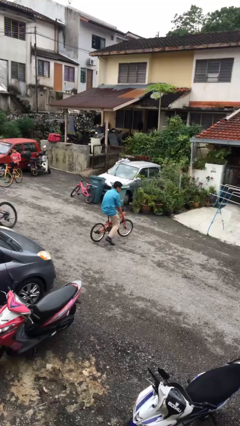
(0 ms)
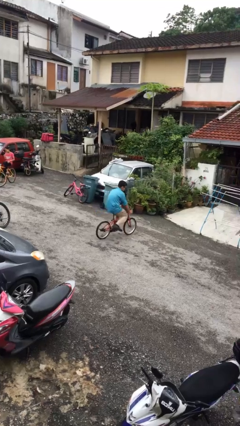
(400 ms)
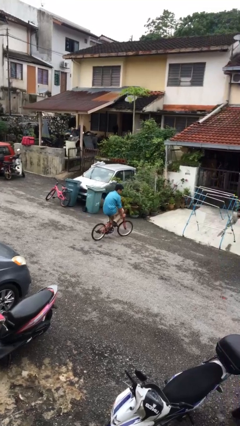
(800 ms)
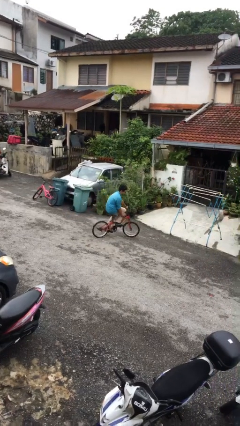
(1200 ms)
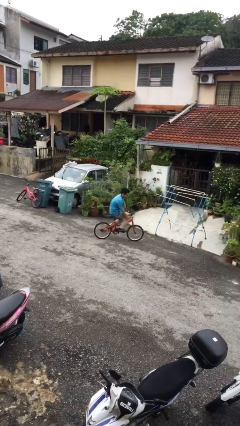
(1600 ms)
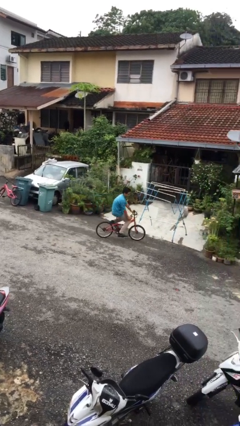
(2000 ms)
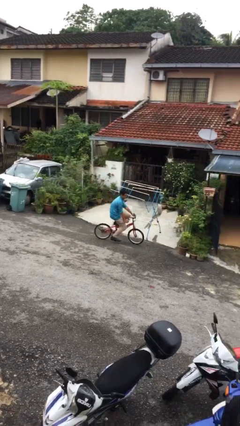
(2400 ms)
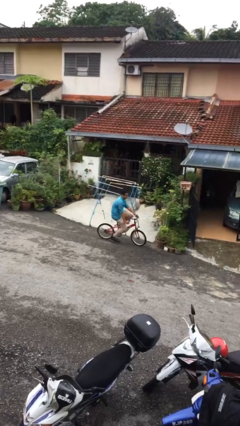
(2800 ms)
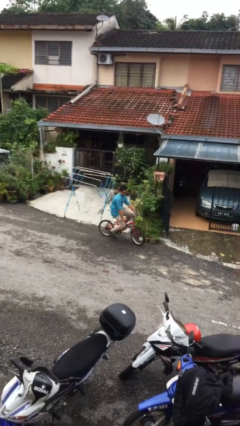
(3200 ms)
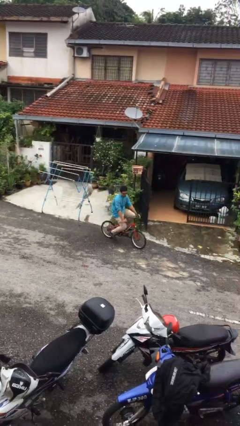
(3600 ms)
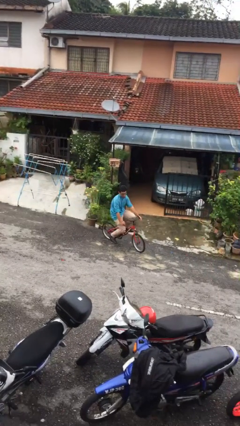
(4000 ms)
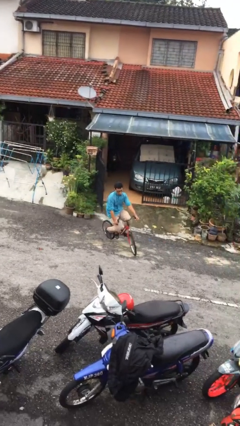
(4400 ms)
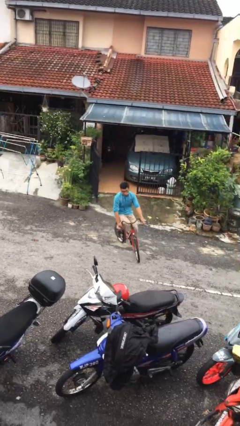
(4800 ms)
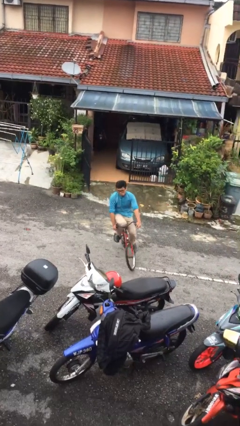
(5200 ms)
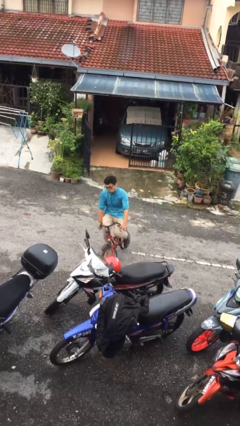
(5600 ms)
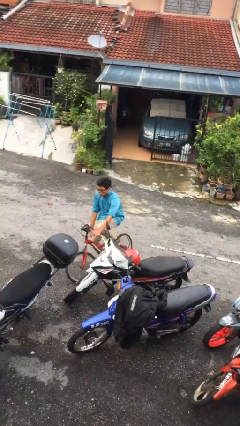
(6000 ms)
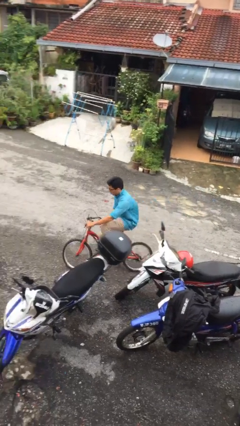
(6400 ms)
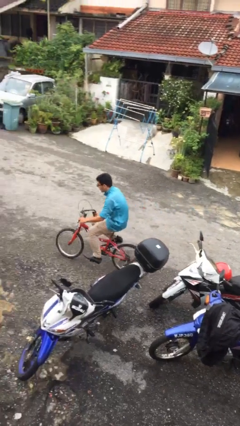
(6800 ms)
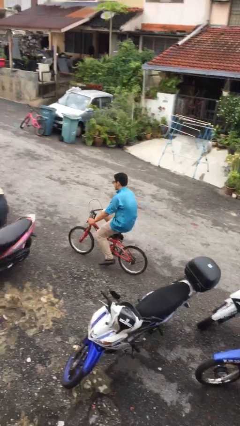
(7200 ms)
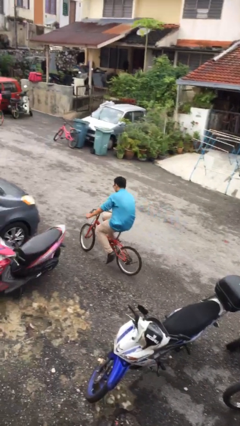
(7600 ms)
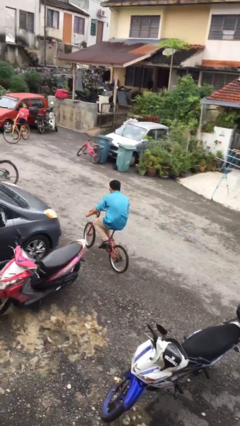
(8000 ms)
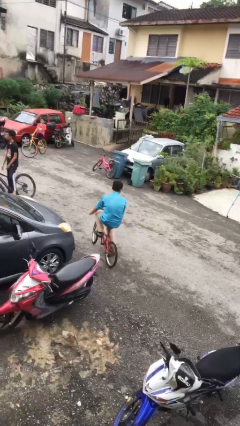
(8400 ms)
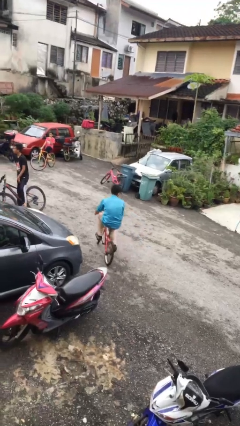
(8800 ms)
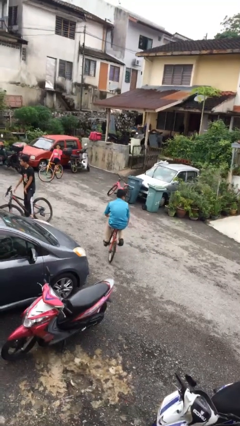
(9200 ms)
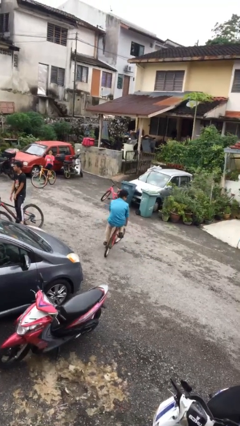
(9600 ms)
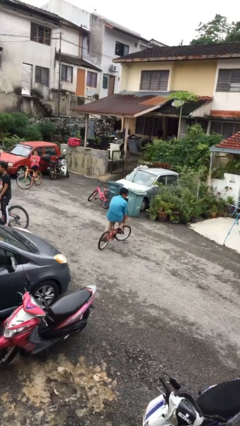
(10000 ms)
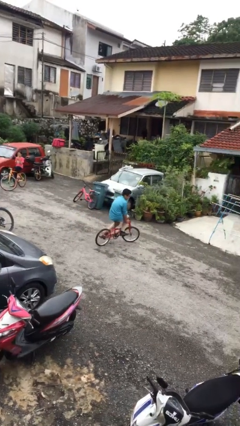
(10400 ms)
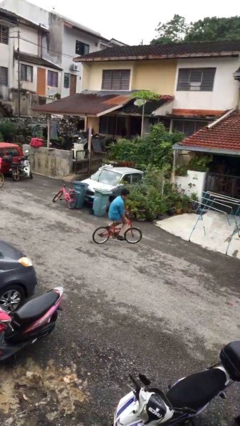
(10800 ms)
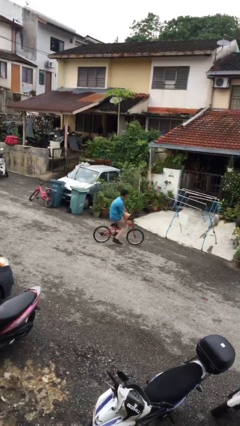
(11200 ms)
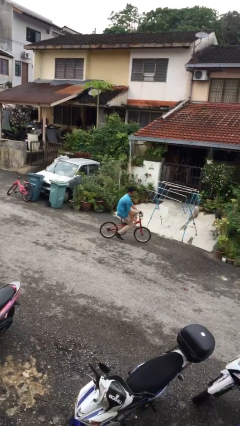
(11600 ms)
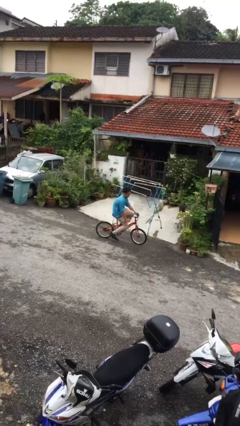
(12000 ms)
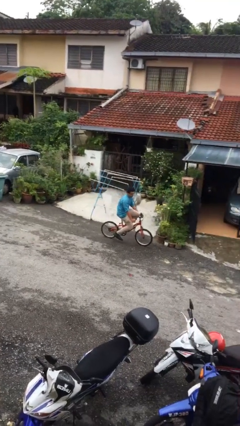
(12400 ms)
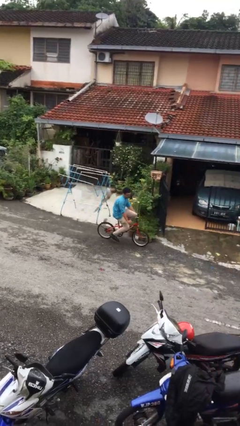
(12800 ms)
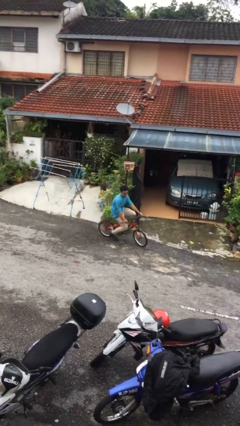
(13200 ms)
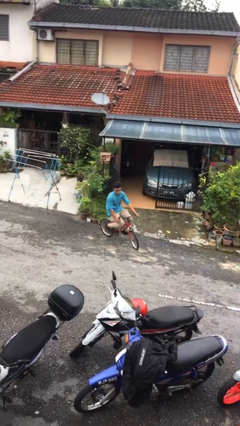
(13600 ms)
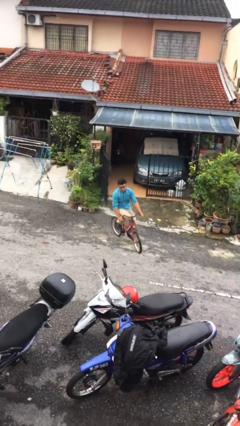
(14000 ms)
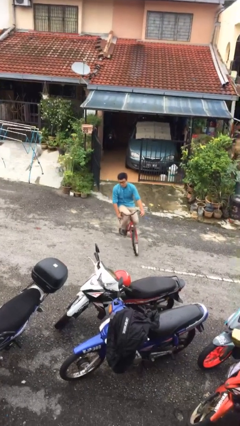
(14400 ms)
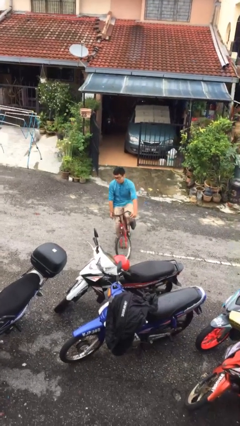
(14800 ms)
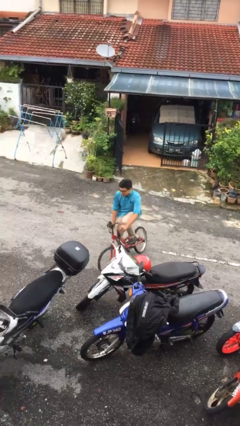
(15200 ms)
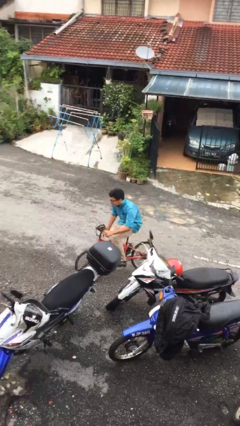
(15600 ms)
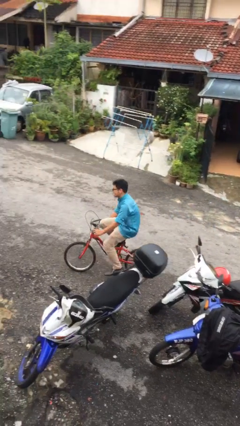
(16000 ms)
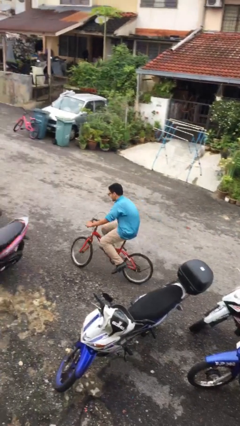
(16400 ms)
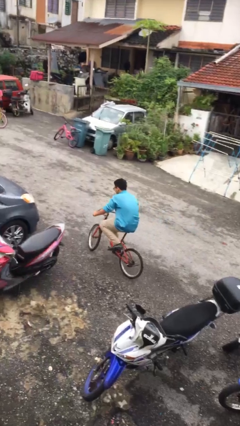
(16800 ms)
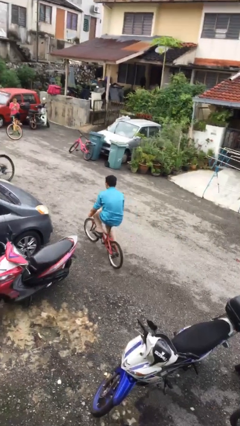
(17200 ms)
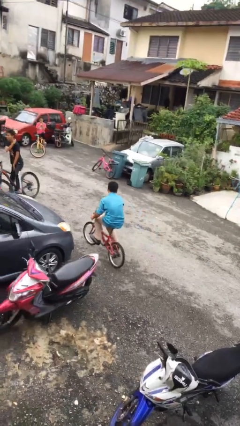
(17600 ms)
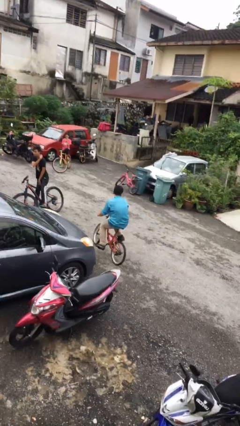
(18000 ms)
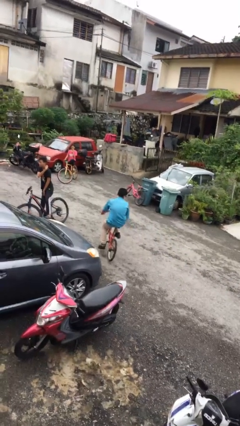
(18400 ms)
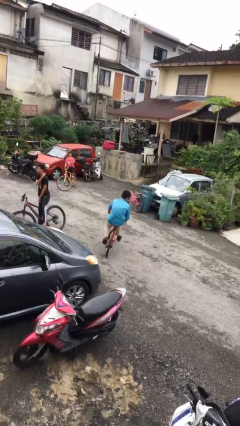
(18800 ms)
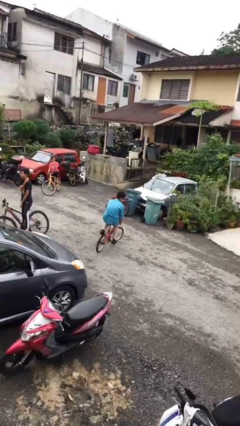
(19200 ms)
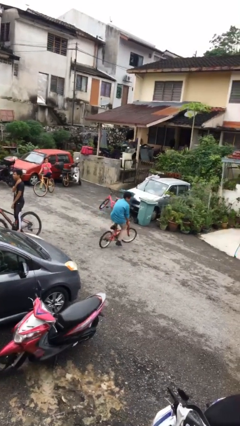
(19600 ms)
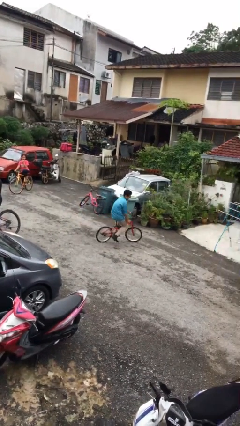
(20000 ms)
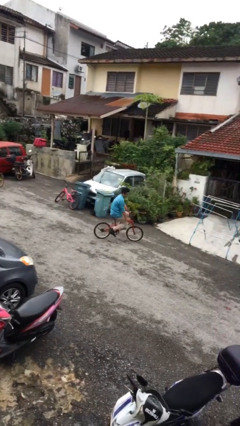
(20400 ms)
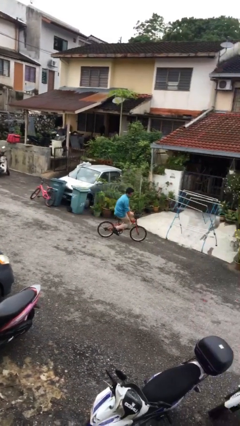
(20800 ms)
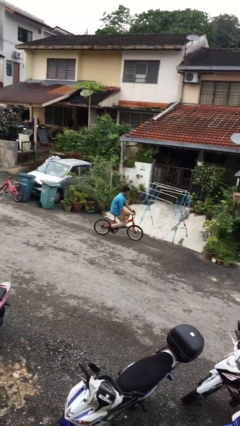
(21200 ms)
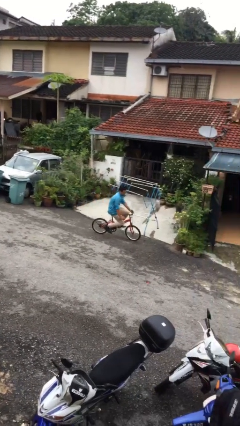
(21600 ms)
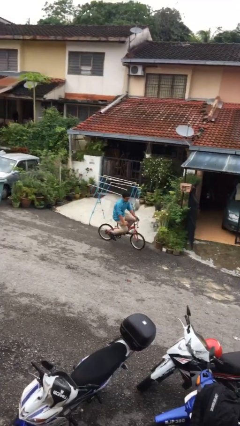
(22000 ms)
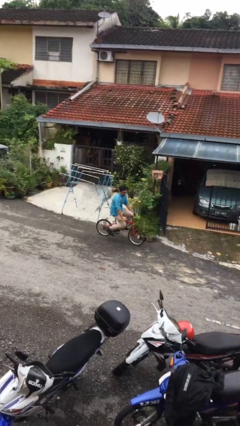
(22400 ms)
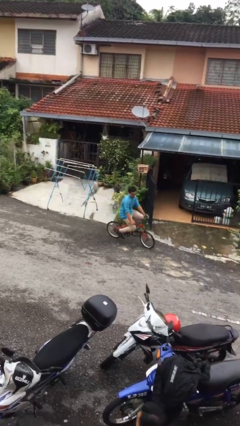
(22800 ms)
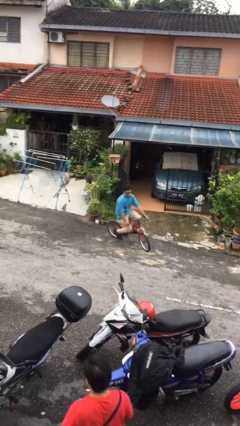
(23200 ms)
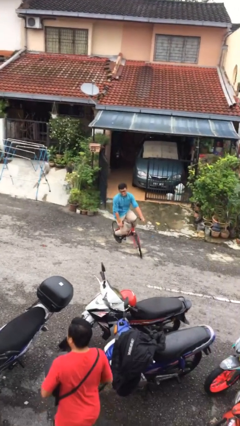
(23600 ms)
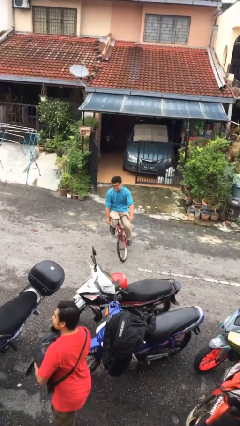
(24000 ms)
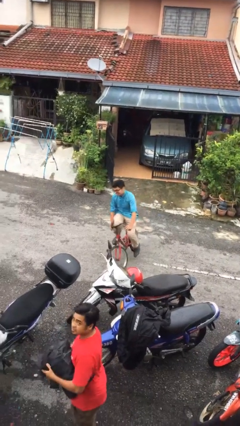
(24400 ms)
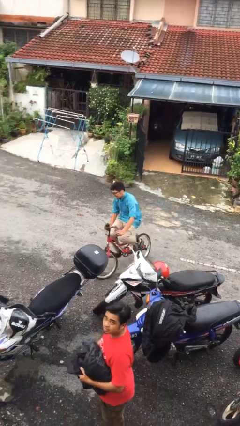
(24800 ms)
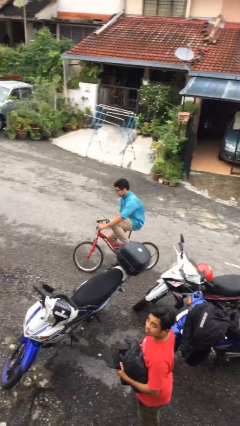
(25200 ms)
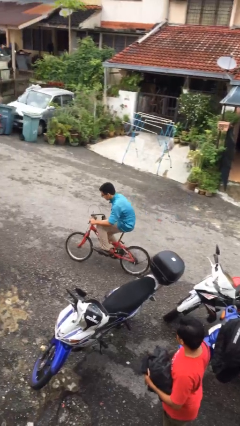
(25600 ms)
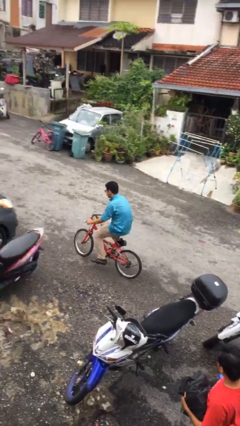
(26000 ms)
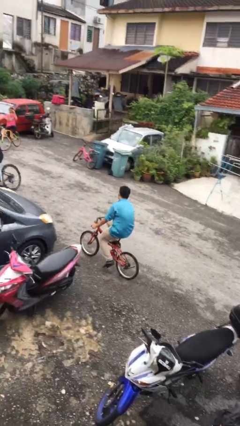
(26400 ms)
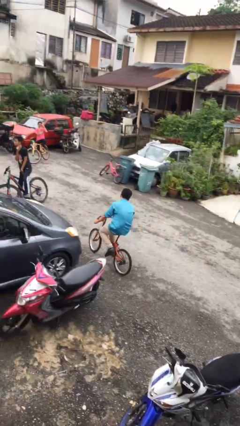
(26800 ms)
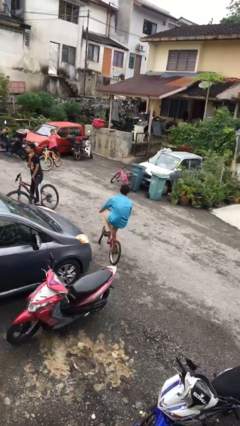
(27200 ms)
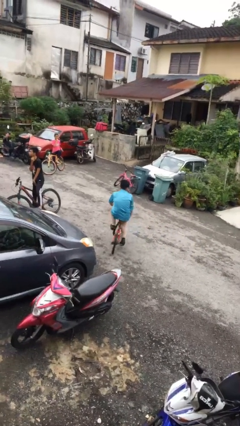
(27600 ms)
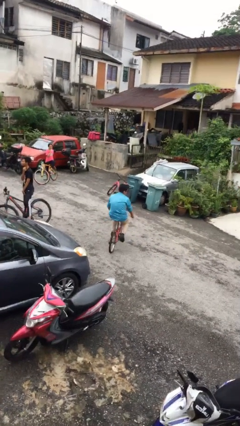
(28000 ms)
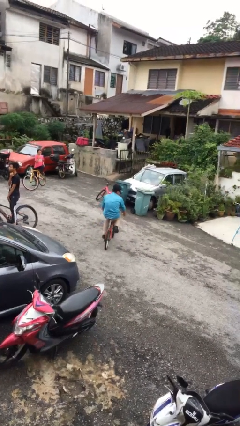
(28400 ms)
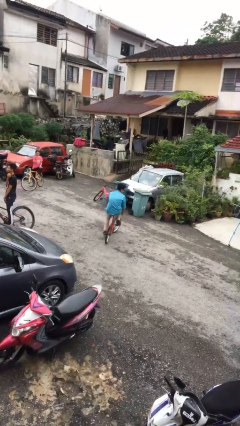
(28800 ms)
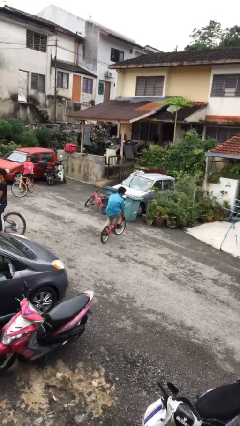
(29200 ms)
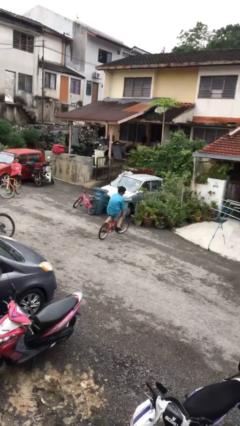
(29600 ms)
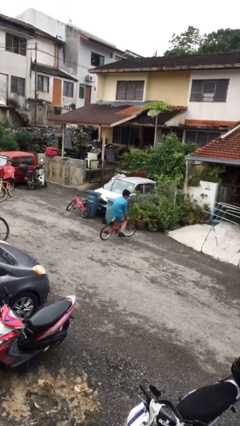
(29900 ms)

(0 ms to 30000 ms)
person rides bicycle

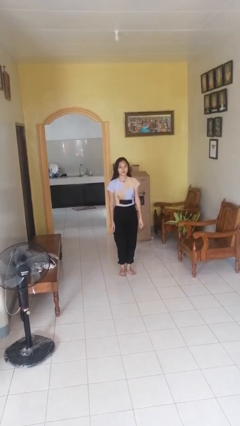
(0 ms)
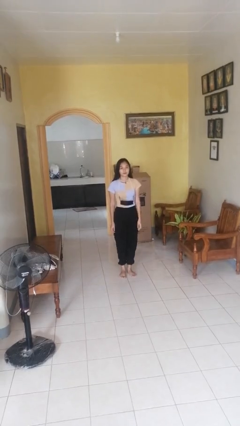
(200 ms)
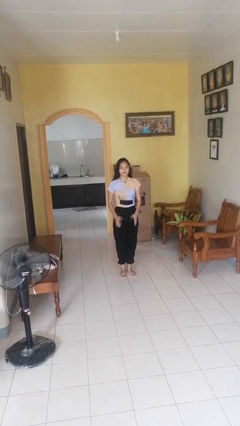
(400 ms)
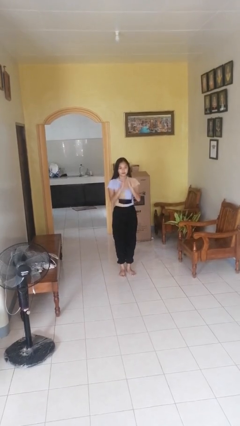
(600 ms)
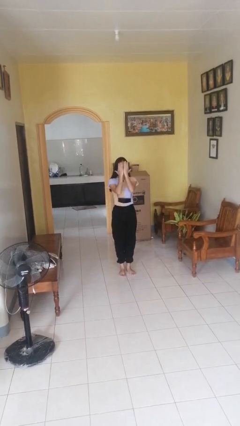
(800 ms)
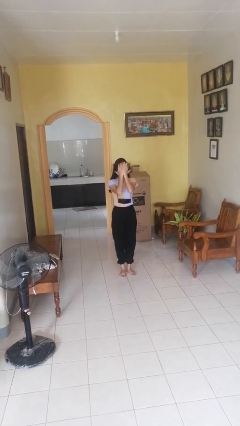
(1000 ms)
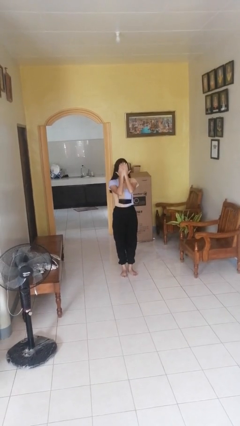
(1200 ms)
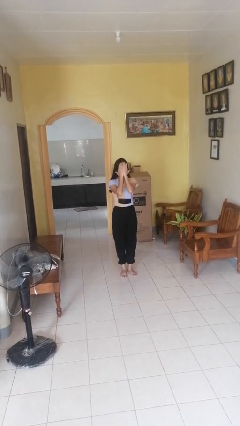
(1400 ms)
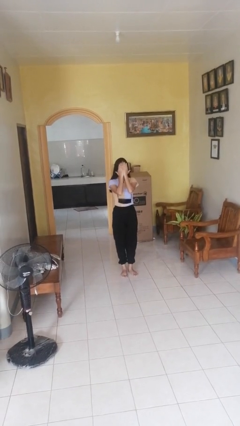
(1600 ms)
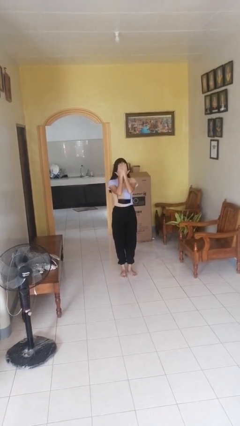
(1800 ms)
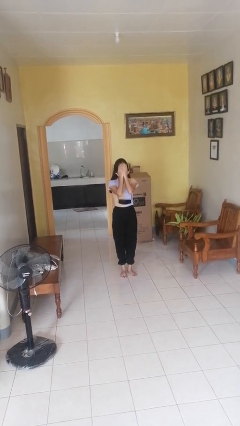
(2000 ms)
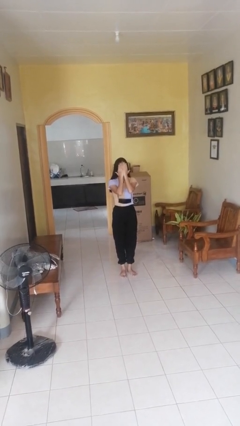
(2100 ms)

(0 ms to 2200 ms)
person covers face with hands

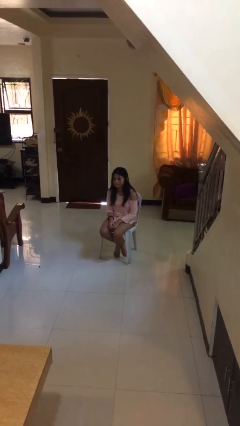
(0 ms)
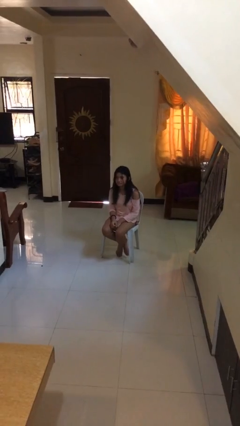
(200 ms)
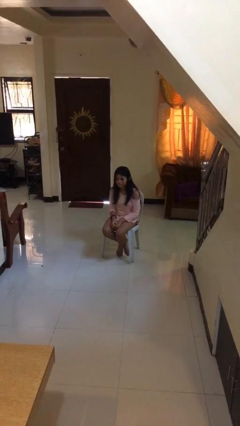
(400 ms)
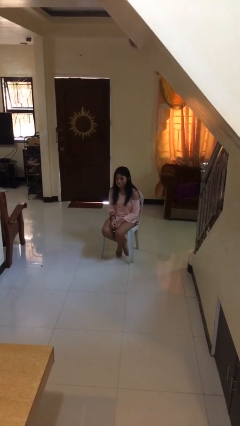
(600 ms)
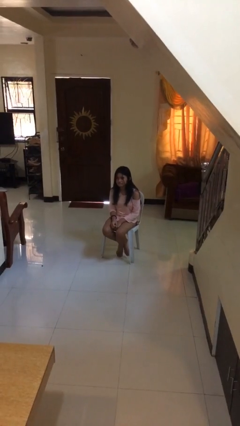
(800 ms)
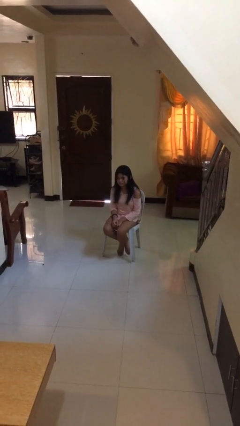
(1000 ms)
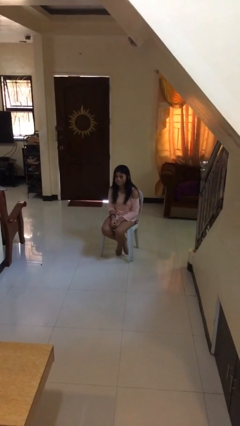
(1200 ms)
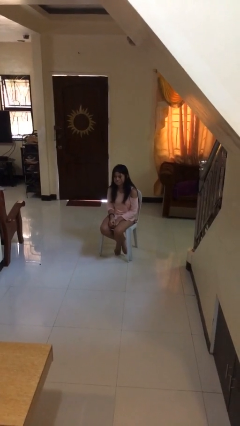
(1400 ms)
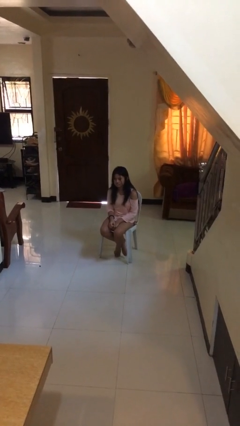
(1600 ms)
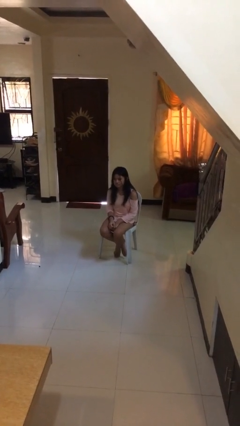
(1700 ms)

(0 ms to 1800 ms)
person nods head
